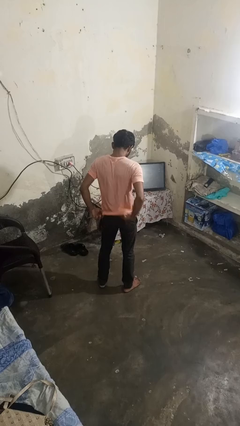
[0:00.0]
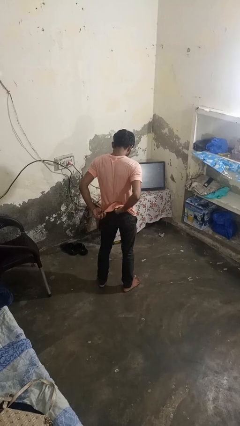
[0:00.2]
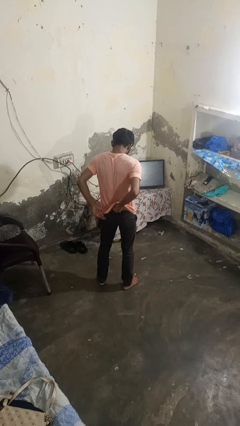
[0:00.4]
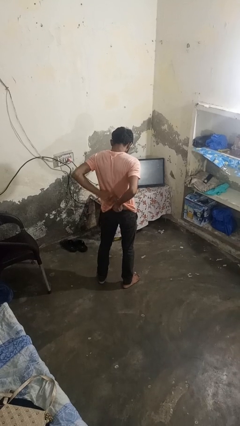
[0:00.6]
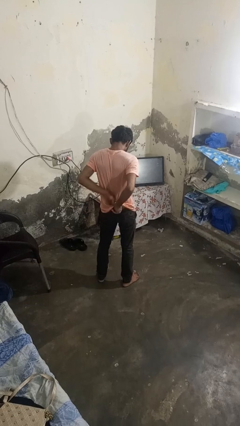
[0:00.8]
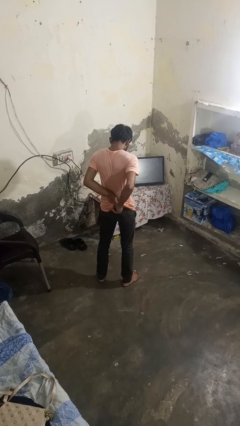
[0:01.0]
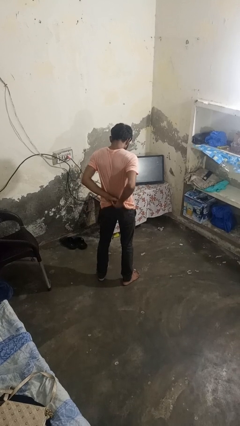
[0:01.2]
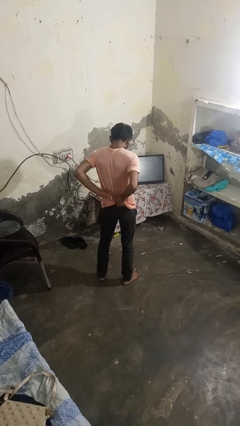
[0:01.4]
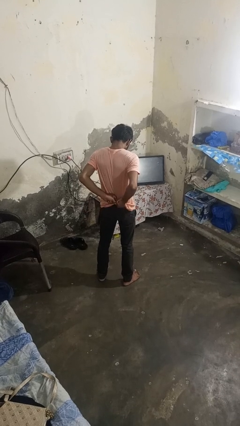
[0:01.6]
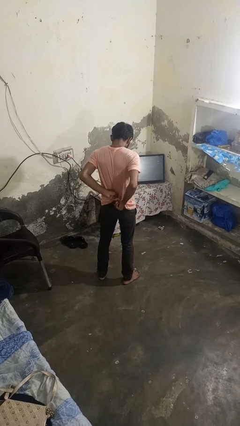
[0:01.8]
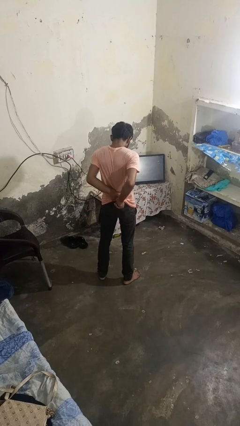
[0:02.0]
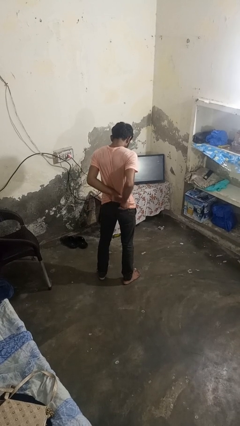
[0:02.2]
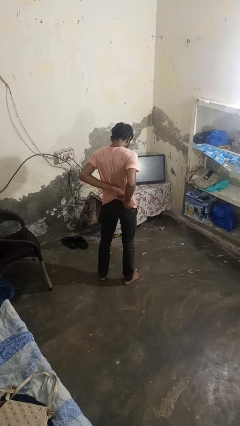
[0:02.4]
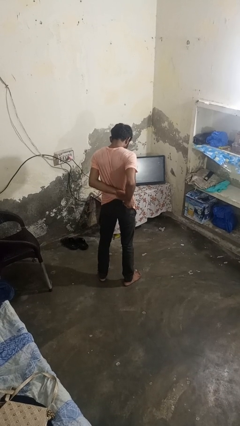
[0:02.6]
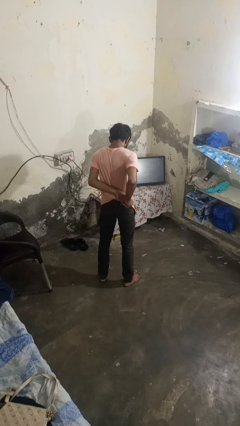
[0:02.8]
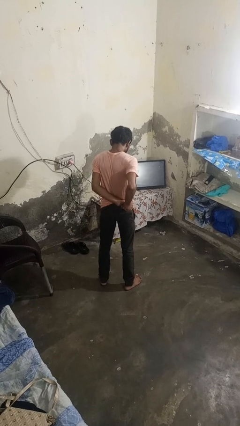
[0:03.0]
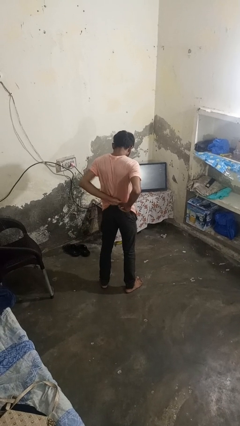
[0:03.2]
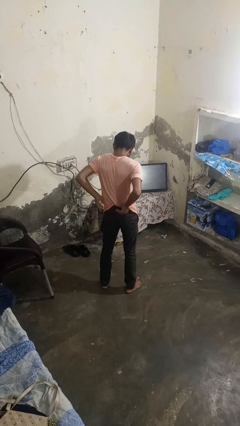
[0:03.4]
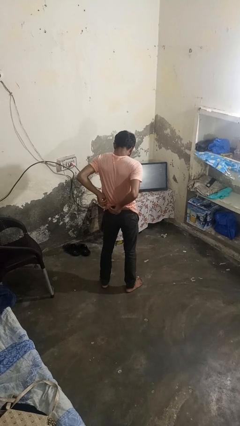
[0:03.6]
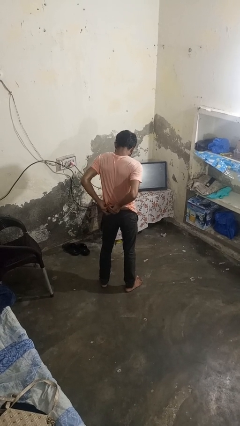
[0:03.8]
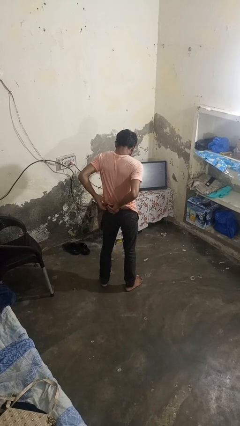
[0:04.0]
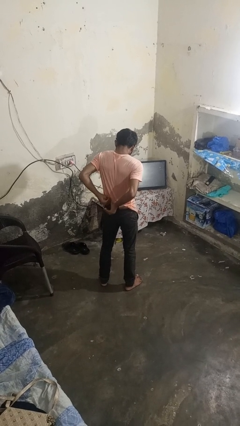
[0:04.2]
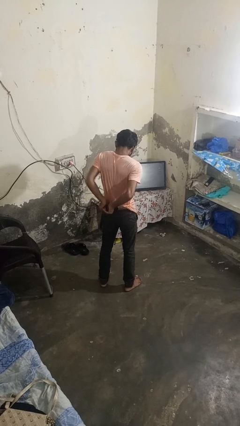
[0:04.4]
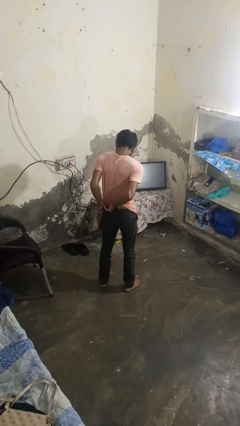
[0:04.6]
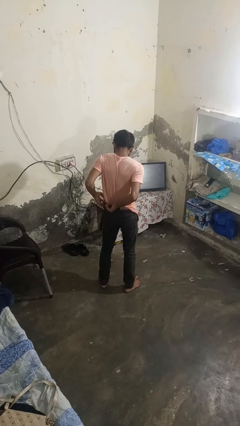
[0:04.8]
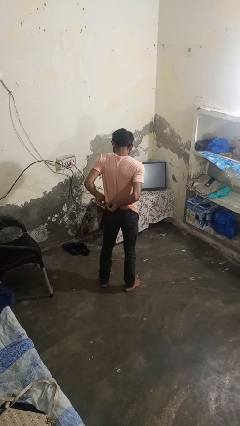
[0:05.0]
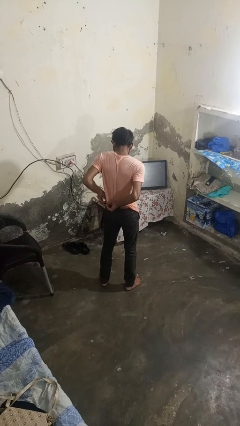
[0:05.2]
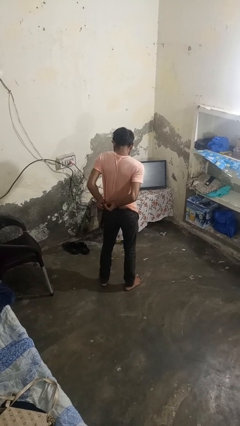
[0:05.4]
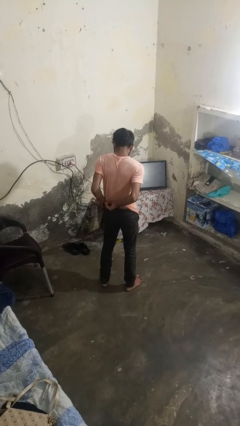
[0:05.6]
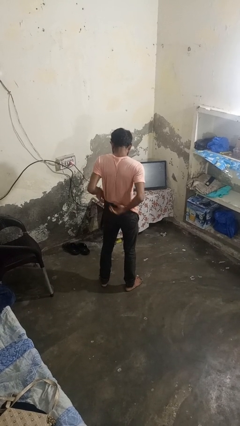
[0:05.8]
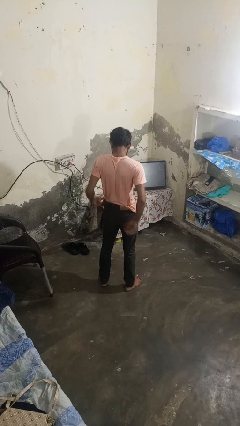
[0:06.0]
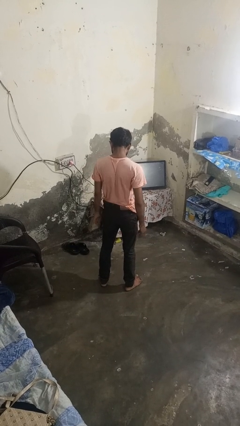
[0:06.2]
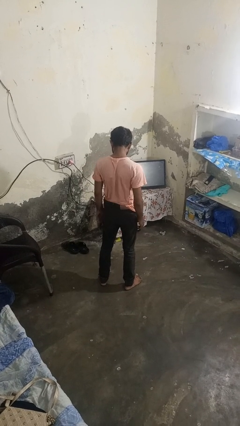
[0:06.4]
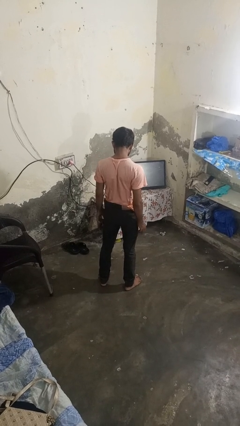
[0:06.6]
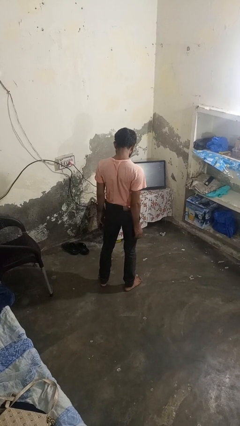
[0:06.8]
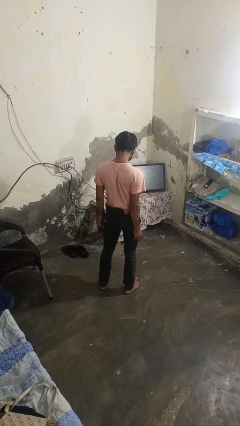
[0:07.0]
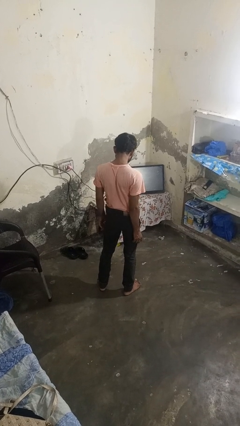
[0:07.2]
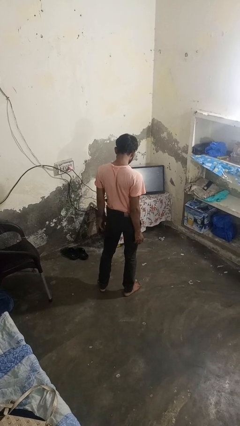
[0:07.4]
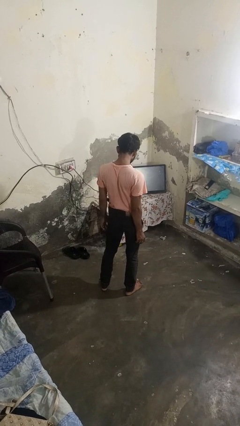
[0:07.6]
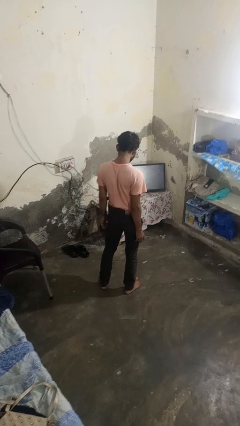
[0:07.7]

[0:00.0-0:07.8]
person tucks in shirt

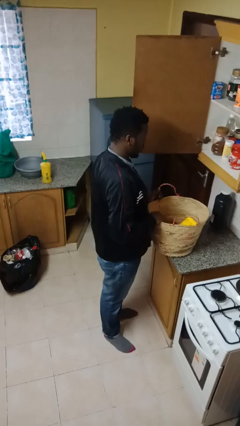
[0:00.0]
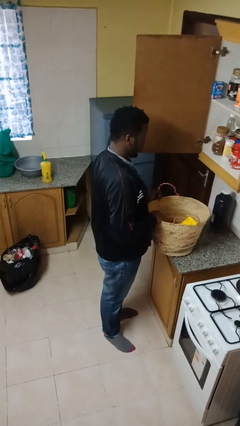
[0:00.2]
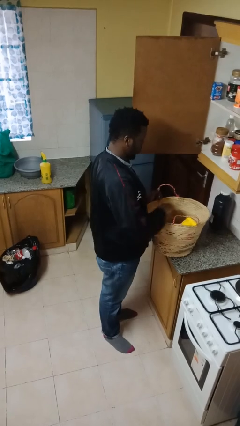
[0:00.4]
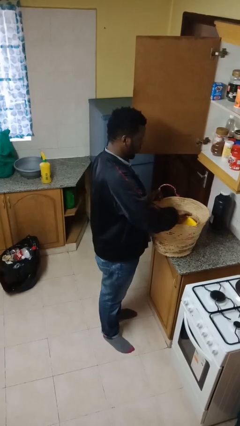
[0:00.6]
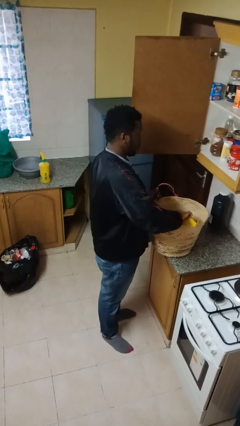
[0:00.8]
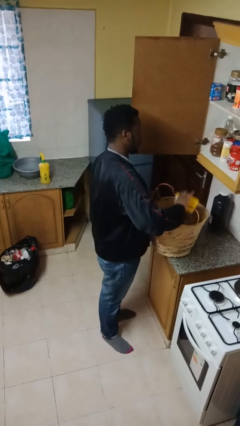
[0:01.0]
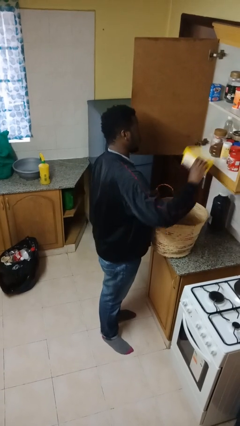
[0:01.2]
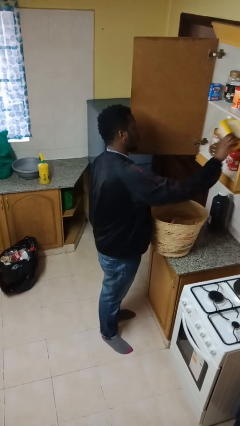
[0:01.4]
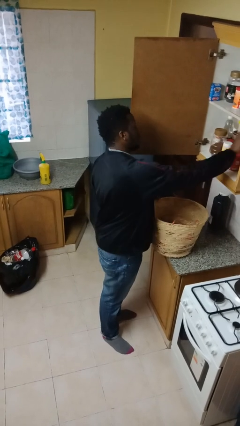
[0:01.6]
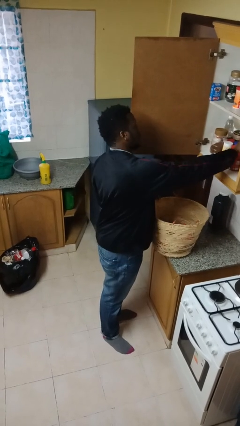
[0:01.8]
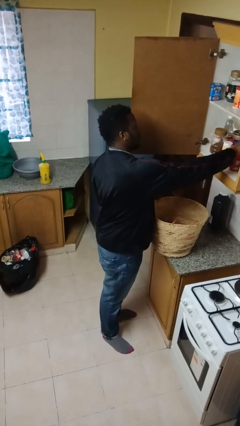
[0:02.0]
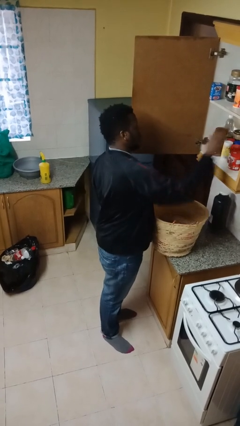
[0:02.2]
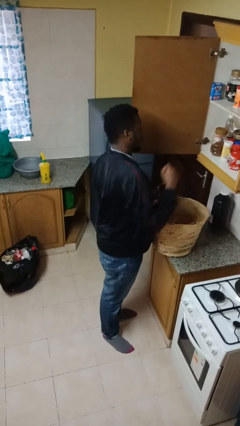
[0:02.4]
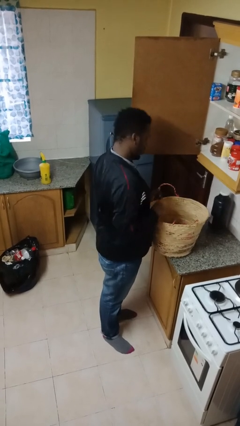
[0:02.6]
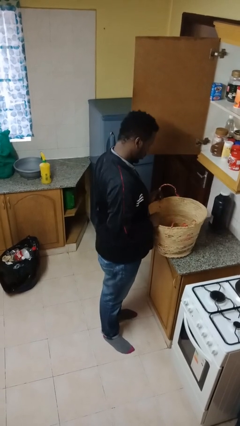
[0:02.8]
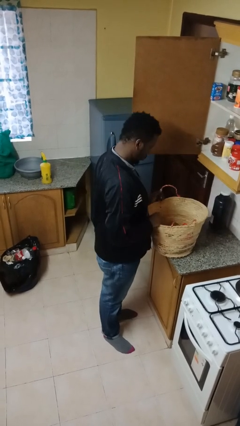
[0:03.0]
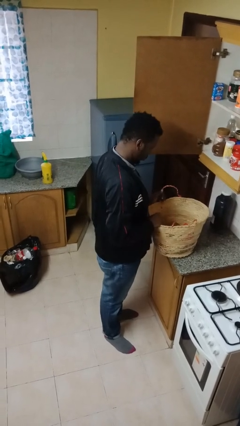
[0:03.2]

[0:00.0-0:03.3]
person loads groceries into cabinet

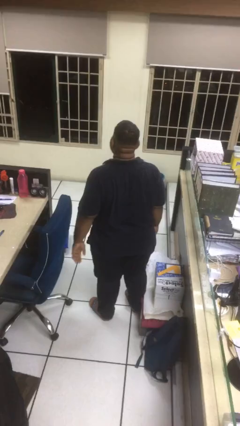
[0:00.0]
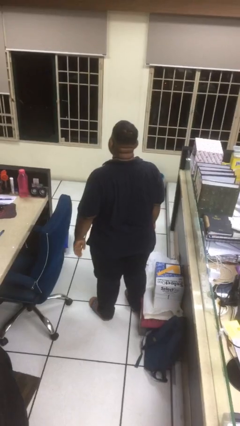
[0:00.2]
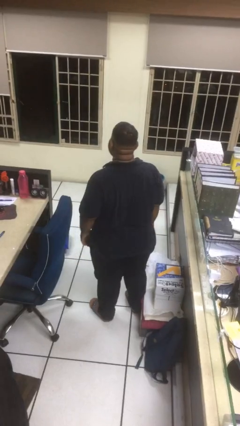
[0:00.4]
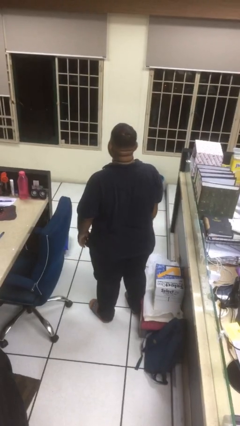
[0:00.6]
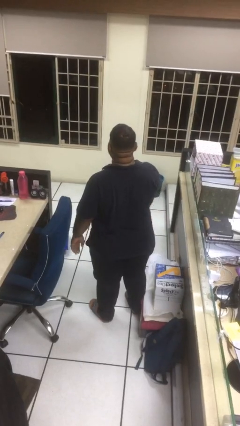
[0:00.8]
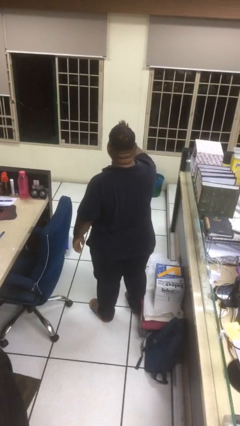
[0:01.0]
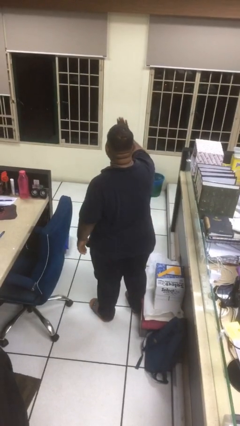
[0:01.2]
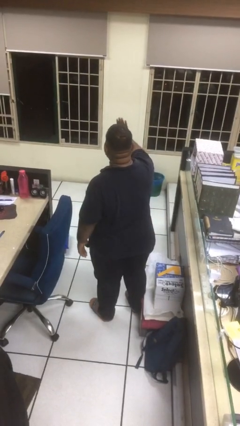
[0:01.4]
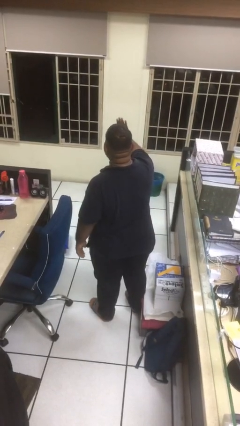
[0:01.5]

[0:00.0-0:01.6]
person gestures stop

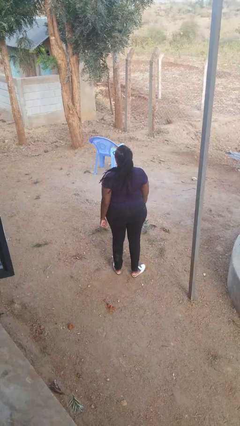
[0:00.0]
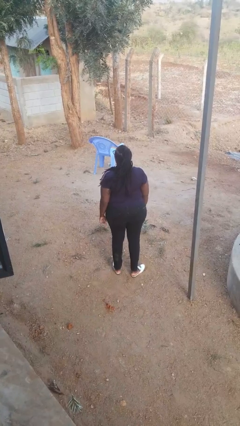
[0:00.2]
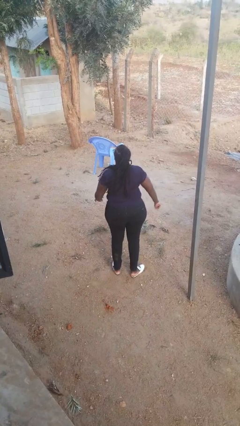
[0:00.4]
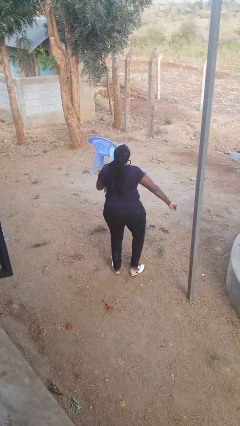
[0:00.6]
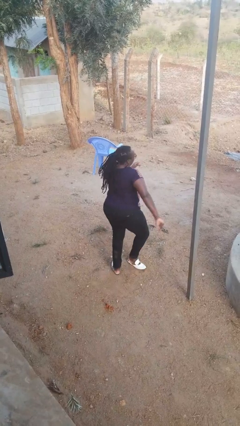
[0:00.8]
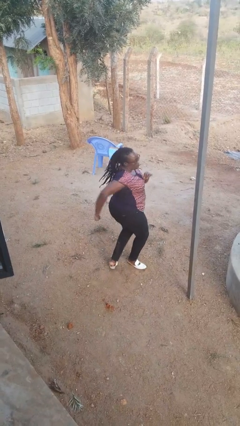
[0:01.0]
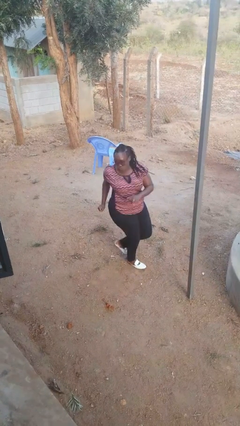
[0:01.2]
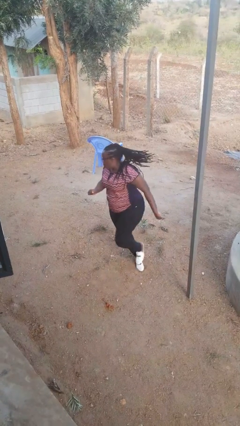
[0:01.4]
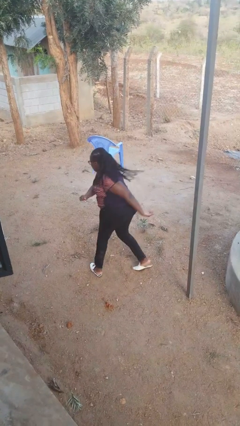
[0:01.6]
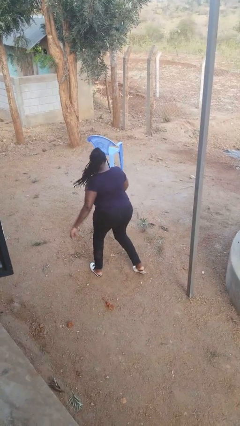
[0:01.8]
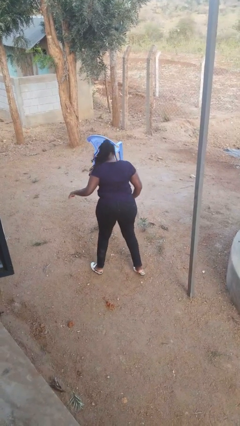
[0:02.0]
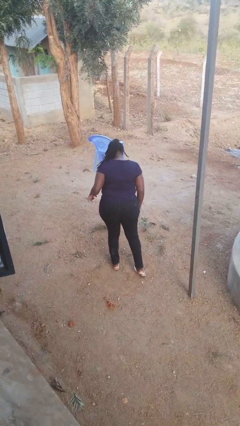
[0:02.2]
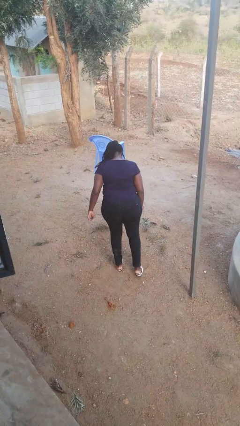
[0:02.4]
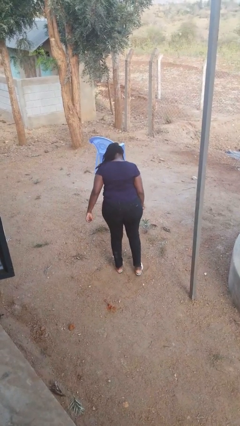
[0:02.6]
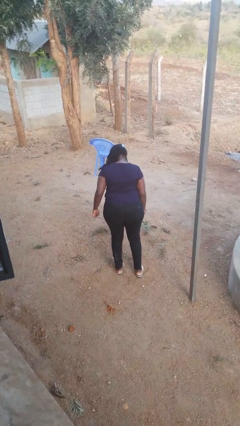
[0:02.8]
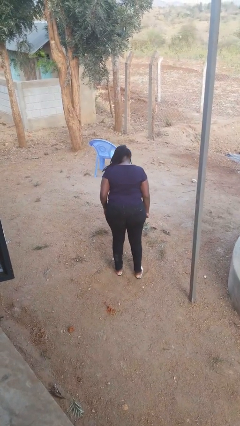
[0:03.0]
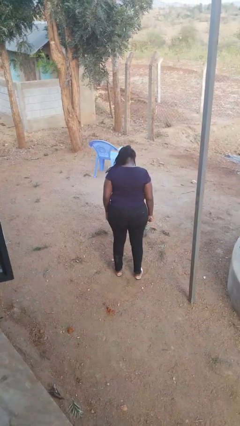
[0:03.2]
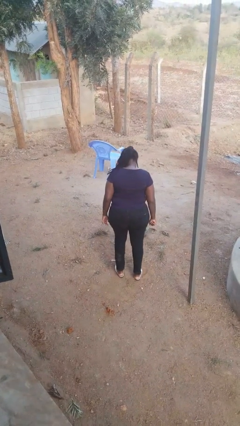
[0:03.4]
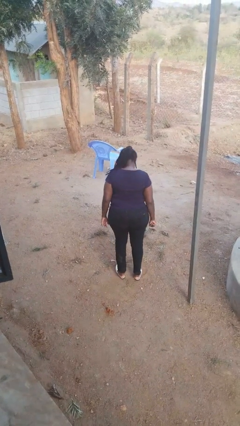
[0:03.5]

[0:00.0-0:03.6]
person twirls

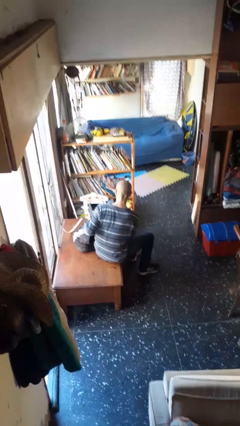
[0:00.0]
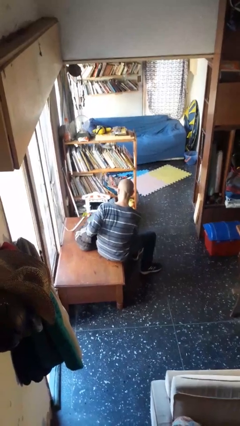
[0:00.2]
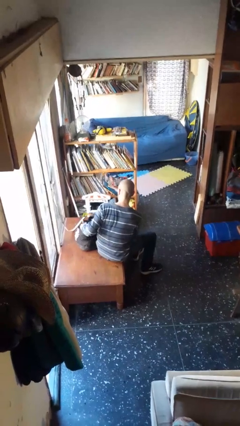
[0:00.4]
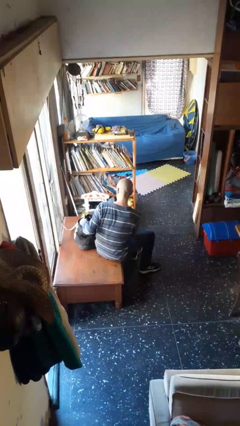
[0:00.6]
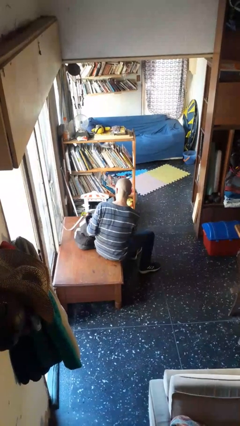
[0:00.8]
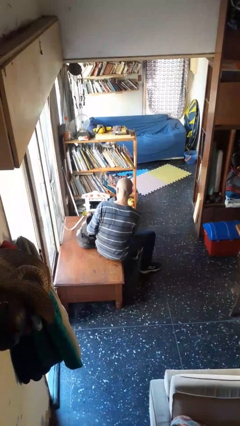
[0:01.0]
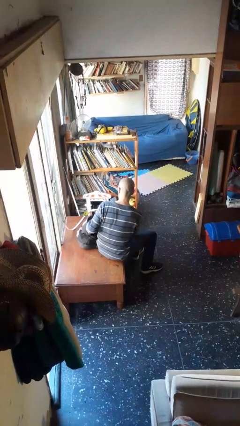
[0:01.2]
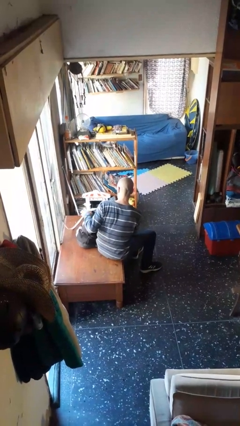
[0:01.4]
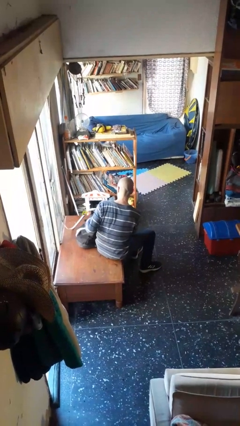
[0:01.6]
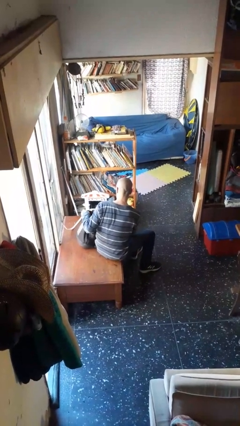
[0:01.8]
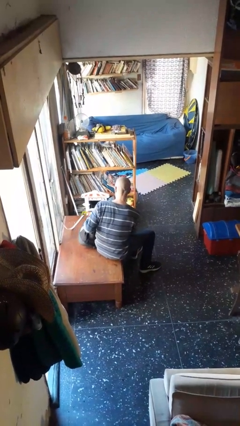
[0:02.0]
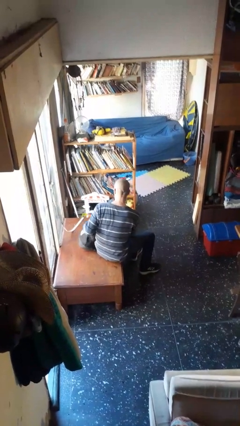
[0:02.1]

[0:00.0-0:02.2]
person puts object into backpack
